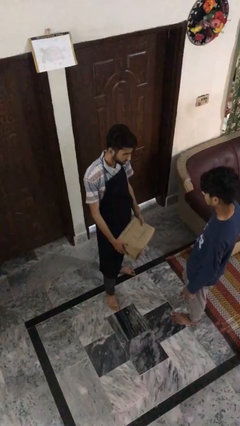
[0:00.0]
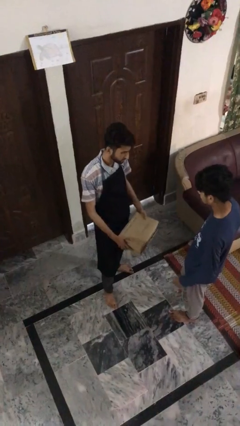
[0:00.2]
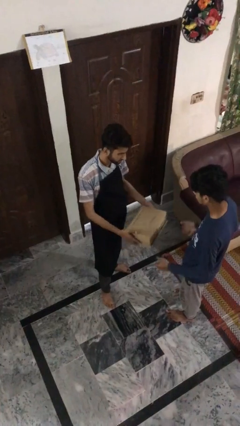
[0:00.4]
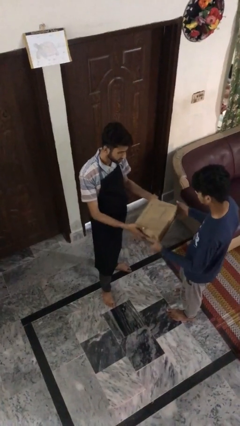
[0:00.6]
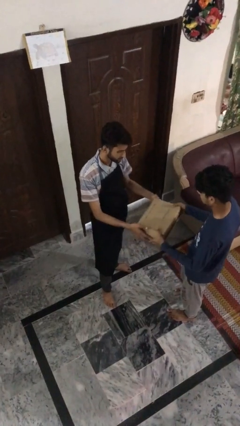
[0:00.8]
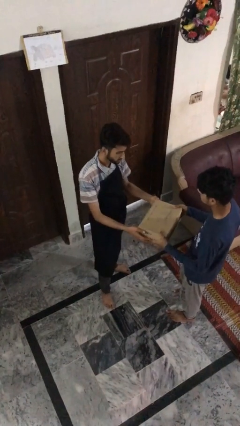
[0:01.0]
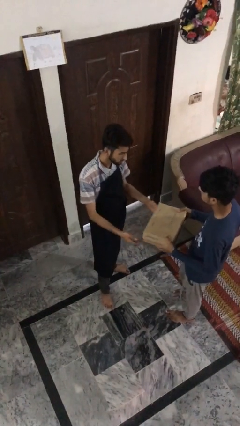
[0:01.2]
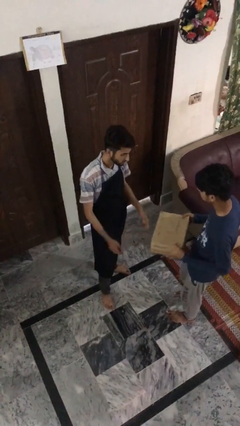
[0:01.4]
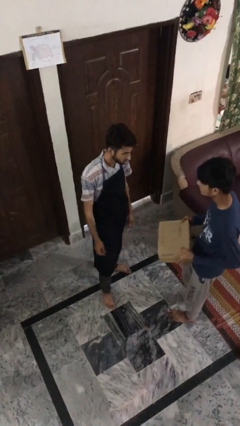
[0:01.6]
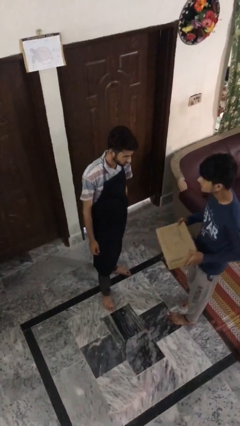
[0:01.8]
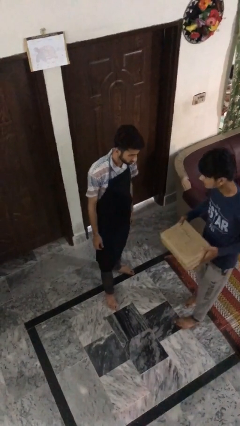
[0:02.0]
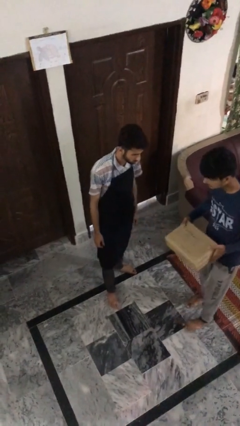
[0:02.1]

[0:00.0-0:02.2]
person transfers object to person

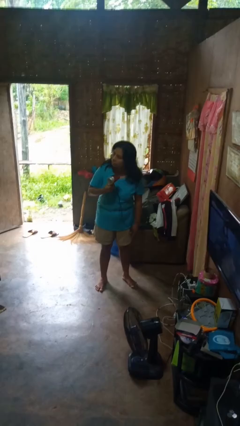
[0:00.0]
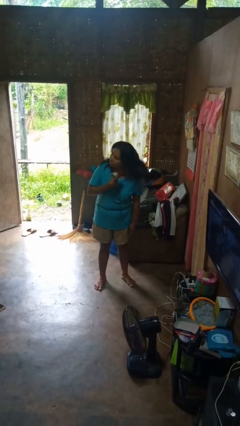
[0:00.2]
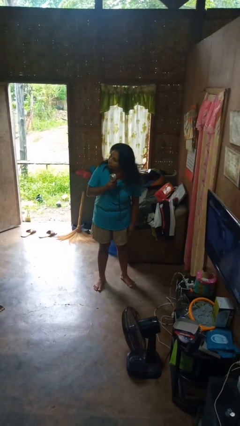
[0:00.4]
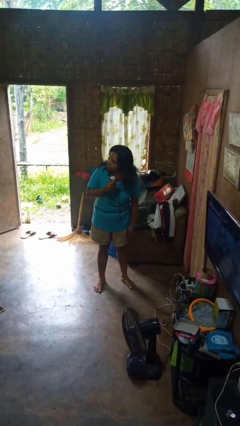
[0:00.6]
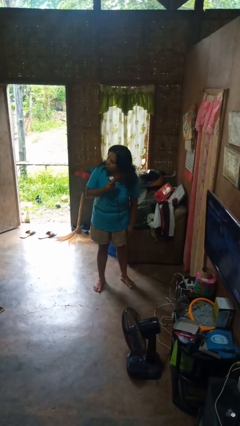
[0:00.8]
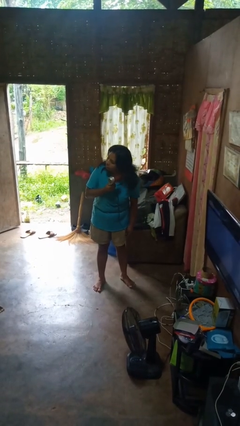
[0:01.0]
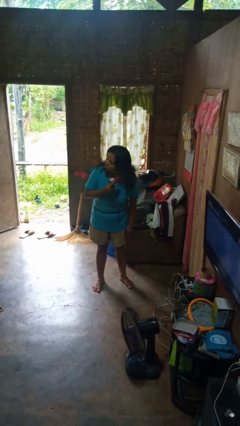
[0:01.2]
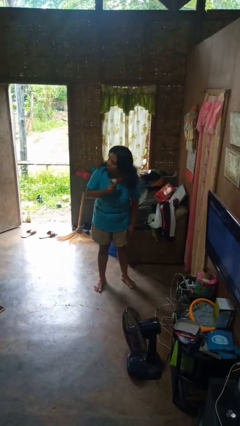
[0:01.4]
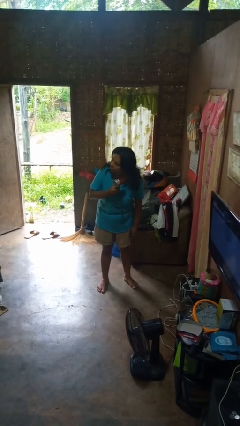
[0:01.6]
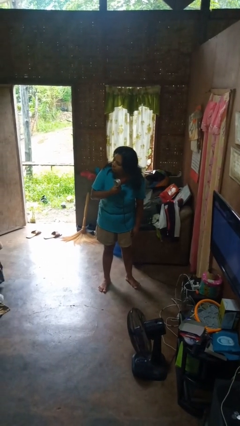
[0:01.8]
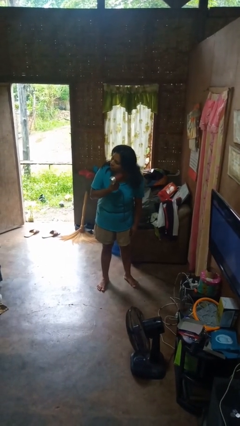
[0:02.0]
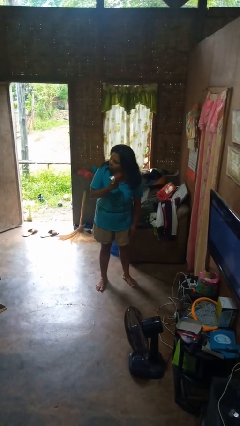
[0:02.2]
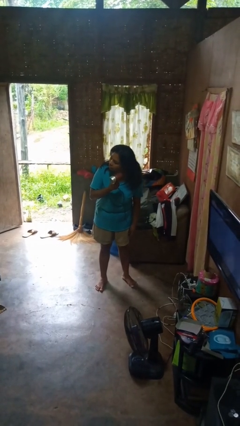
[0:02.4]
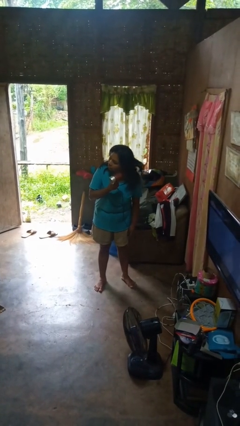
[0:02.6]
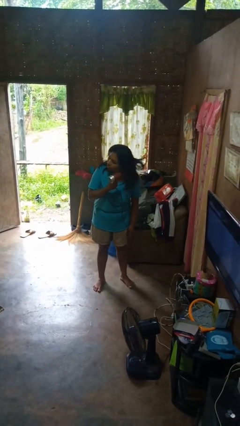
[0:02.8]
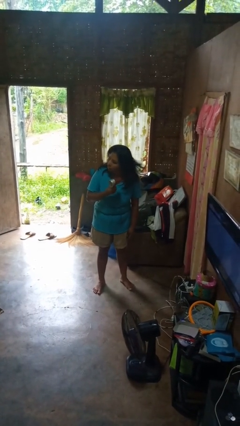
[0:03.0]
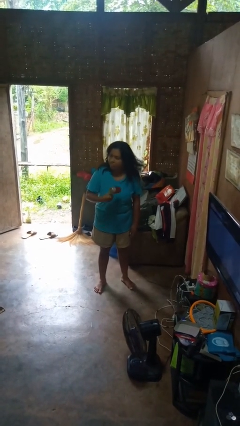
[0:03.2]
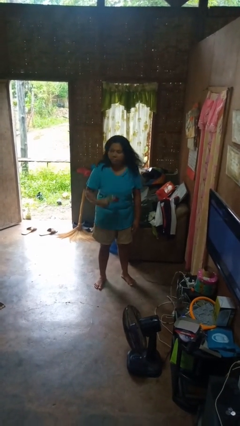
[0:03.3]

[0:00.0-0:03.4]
person dries hair with hairdryer

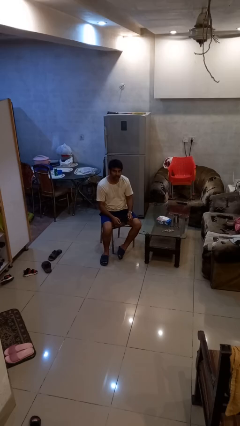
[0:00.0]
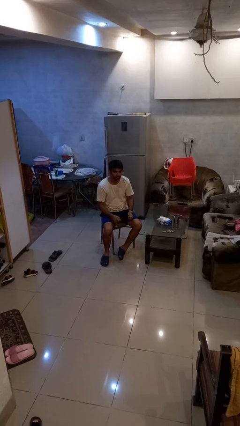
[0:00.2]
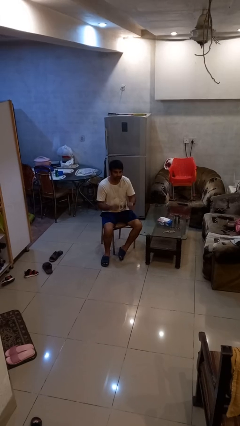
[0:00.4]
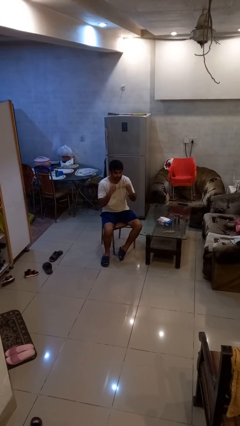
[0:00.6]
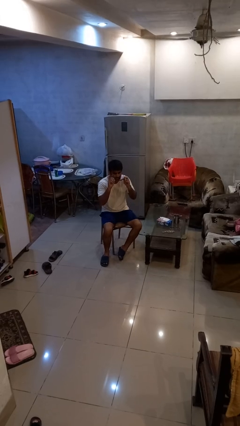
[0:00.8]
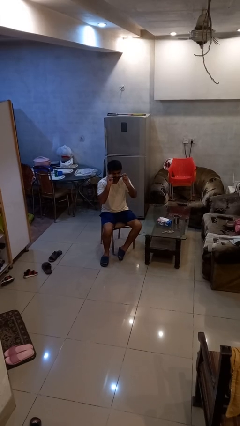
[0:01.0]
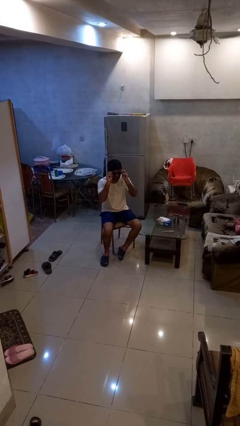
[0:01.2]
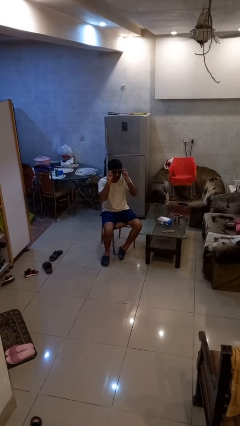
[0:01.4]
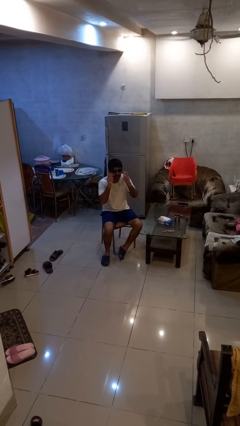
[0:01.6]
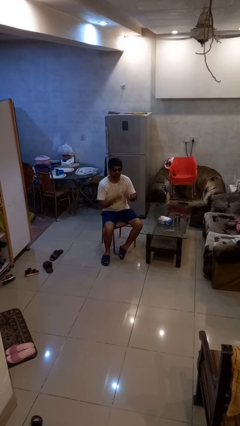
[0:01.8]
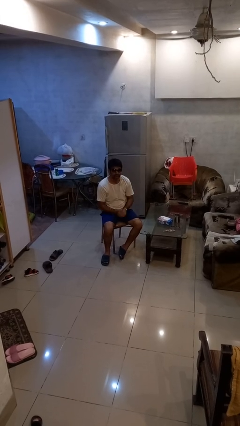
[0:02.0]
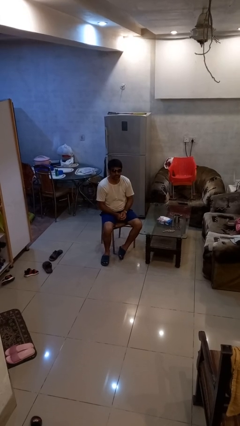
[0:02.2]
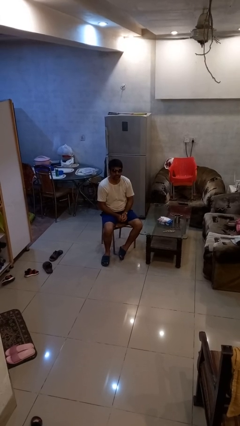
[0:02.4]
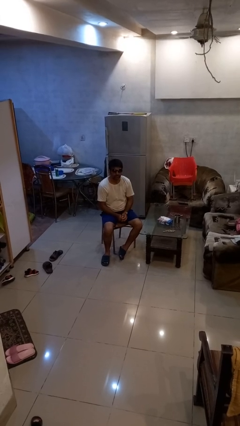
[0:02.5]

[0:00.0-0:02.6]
person puts on sunglasses

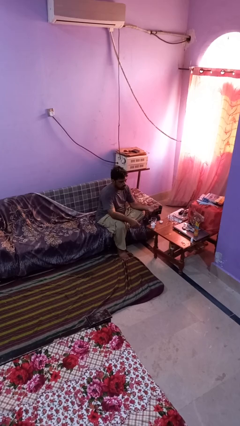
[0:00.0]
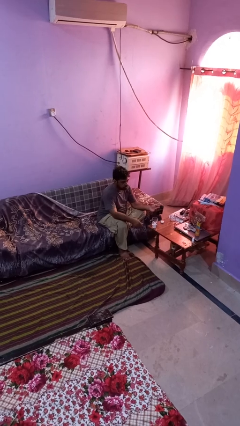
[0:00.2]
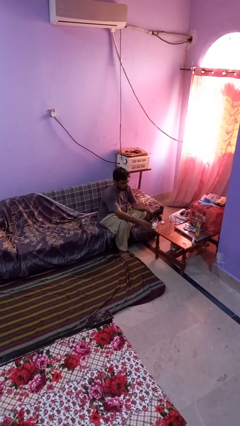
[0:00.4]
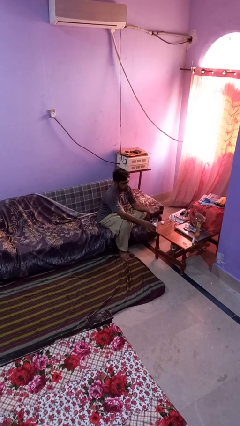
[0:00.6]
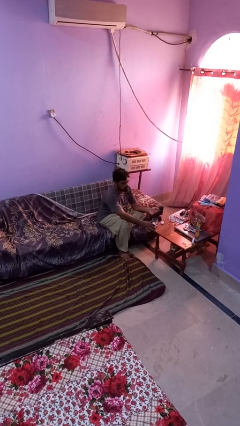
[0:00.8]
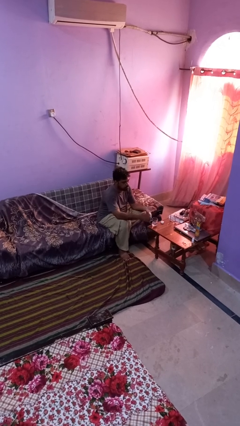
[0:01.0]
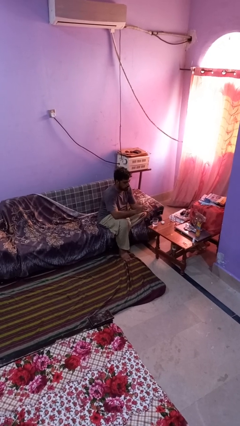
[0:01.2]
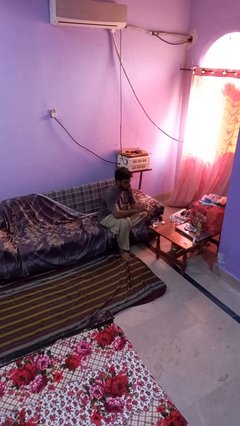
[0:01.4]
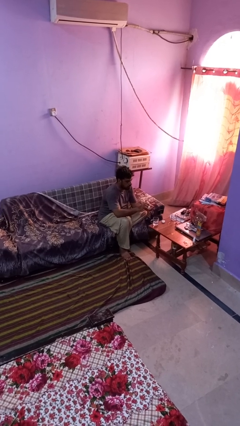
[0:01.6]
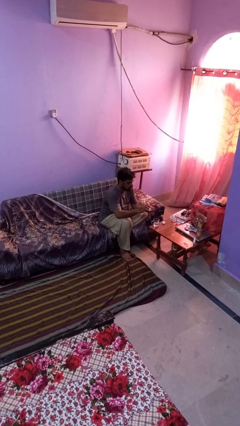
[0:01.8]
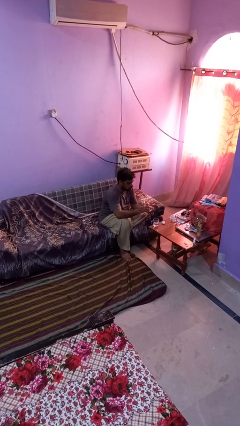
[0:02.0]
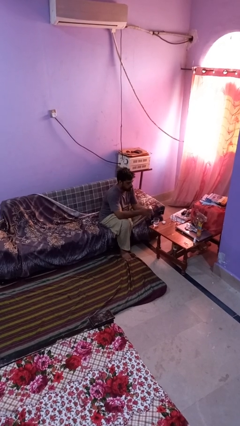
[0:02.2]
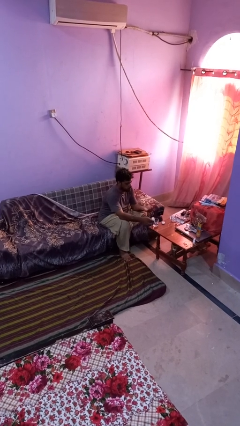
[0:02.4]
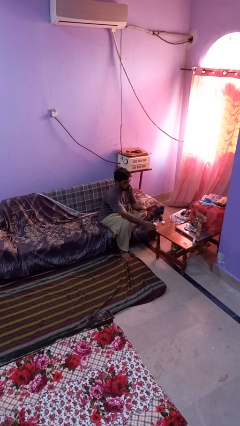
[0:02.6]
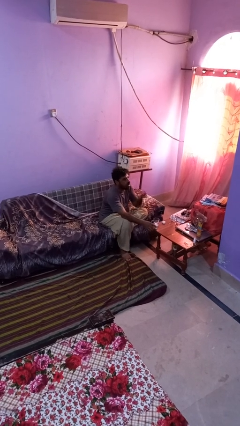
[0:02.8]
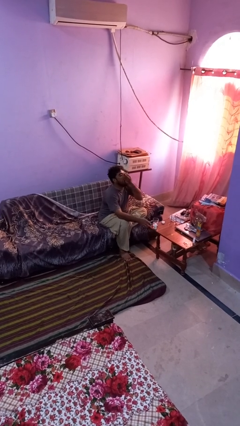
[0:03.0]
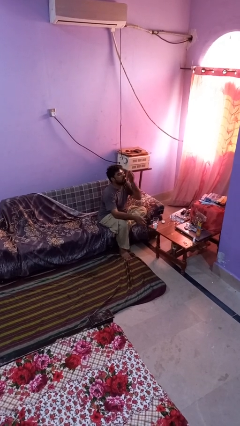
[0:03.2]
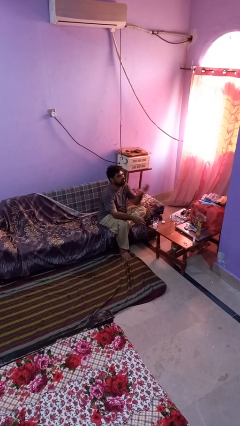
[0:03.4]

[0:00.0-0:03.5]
person takes medicine pills

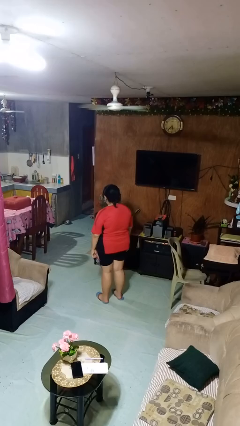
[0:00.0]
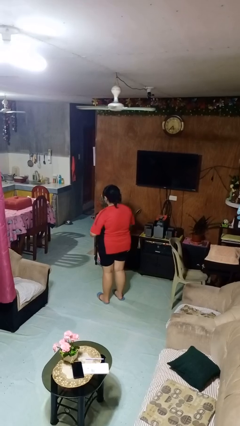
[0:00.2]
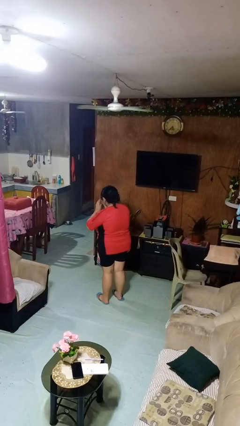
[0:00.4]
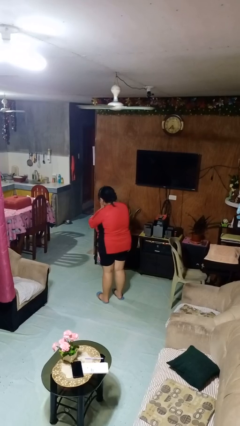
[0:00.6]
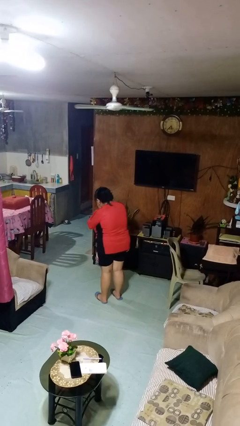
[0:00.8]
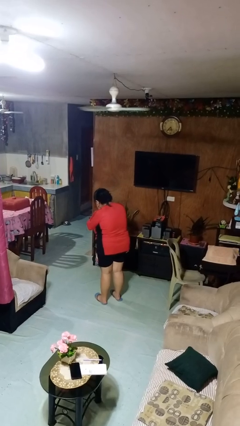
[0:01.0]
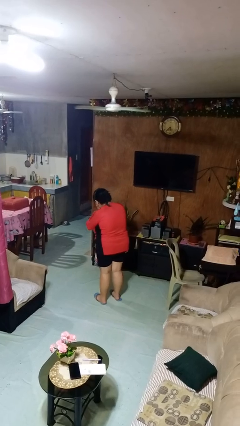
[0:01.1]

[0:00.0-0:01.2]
person sneezes into hand

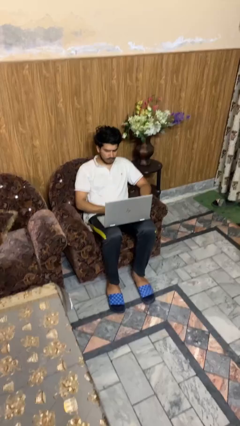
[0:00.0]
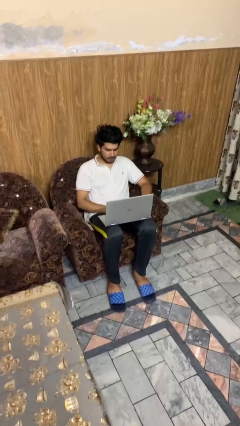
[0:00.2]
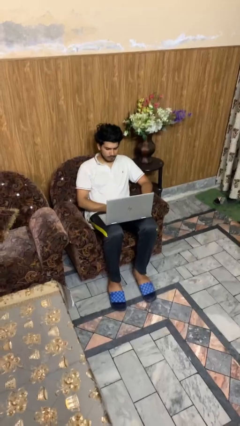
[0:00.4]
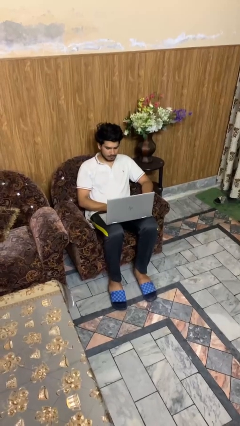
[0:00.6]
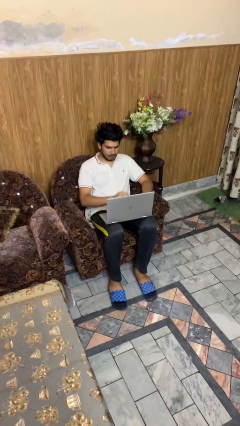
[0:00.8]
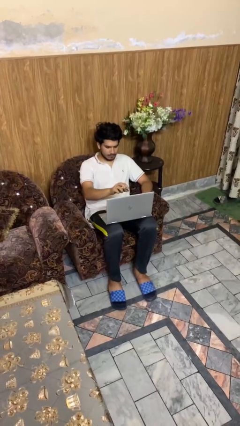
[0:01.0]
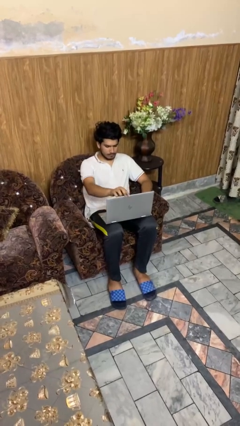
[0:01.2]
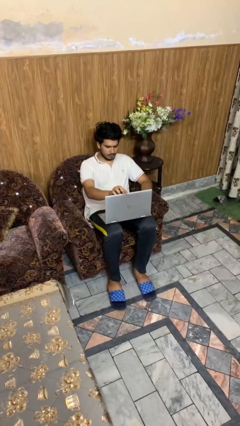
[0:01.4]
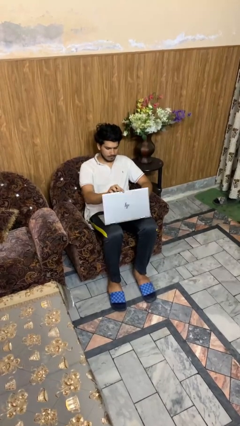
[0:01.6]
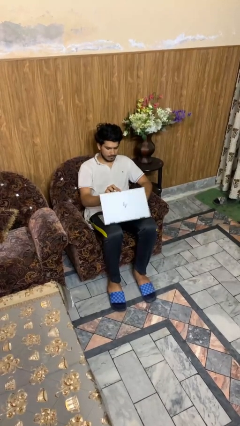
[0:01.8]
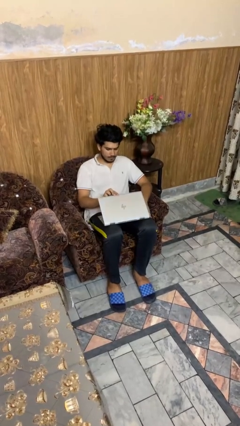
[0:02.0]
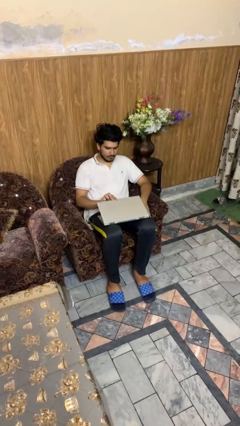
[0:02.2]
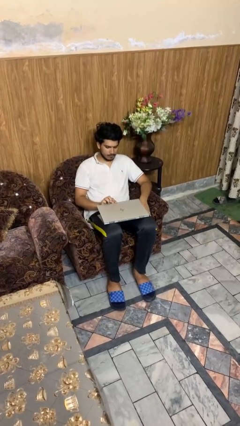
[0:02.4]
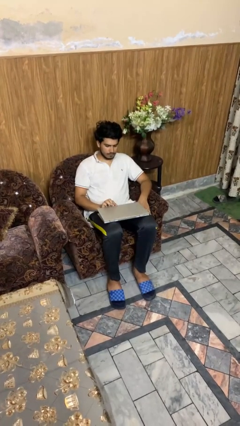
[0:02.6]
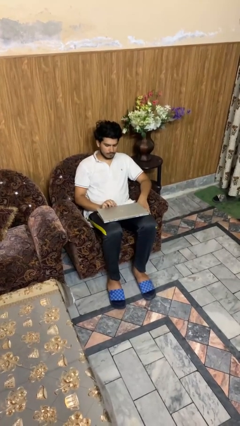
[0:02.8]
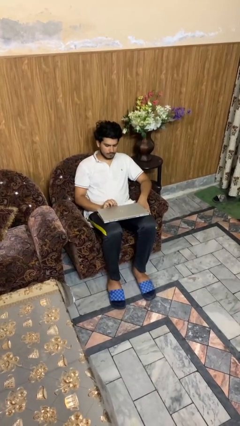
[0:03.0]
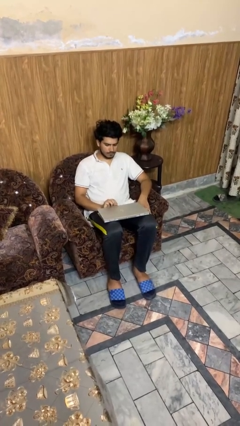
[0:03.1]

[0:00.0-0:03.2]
person closes laptop

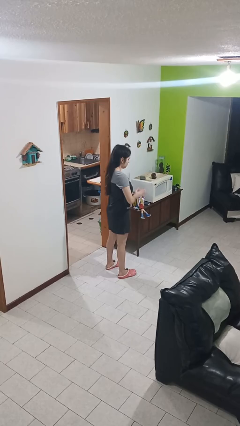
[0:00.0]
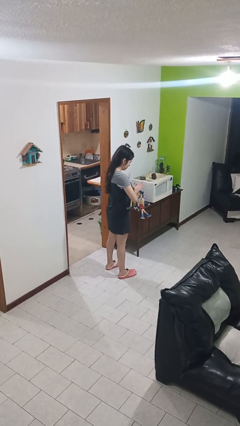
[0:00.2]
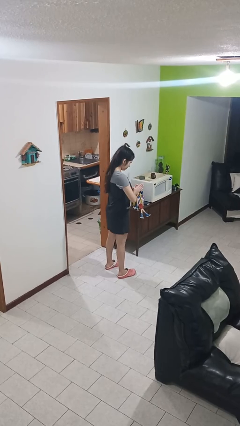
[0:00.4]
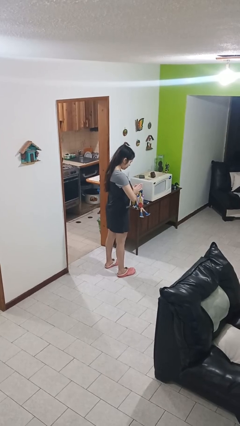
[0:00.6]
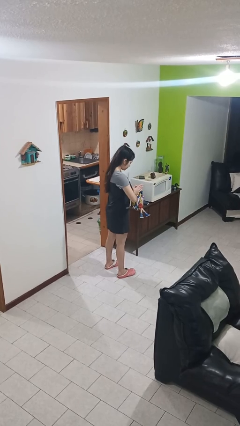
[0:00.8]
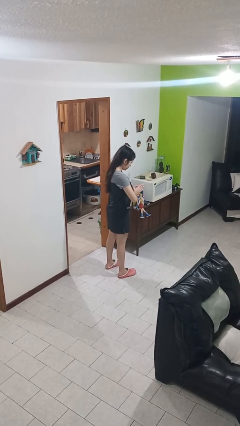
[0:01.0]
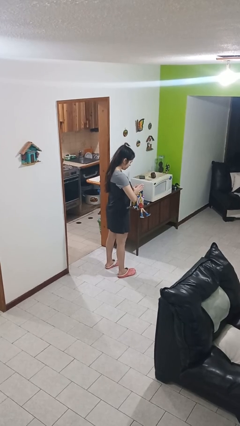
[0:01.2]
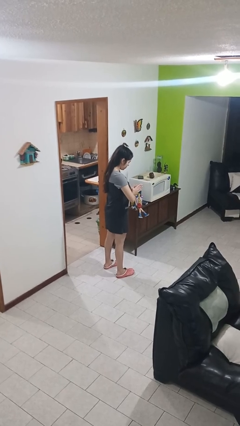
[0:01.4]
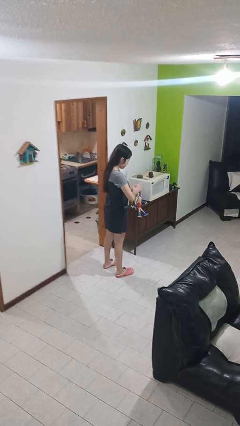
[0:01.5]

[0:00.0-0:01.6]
person prays
